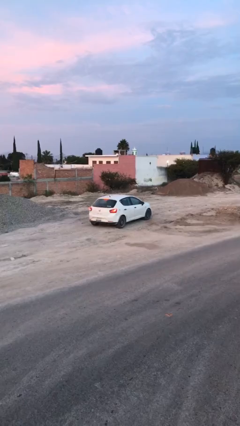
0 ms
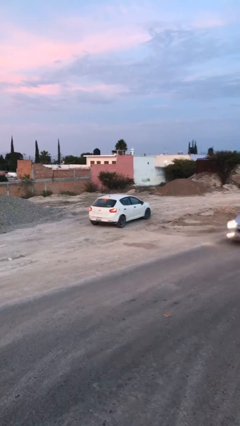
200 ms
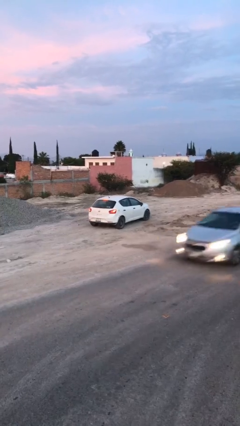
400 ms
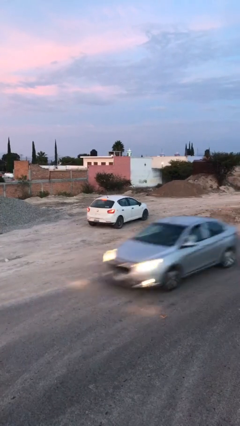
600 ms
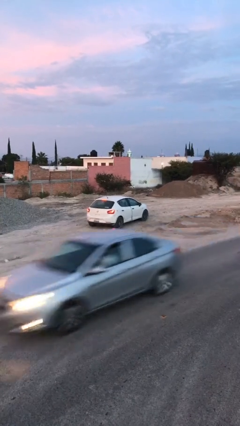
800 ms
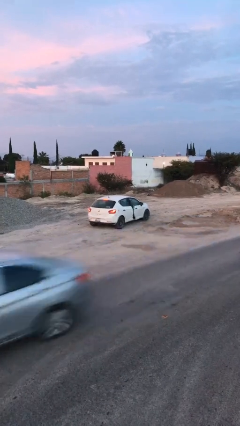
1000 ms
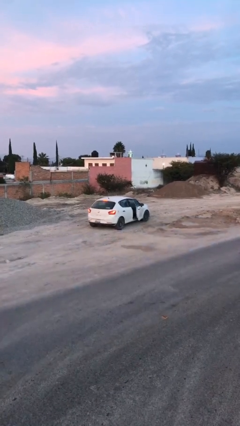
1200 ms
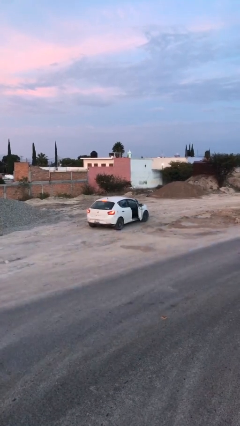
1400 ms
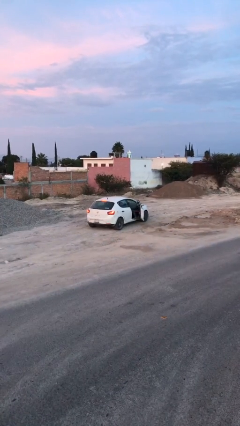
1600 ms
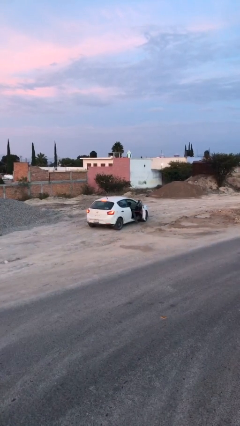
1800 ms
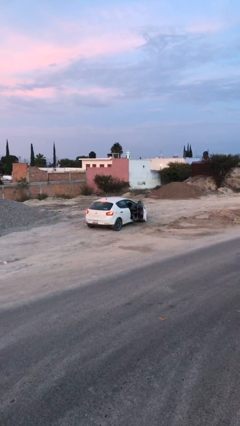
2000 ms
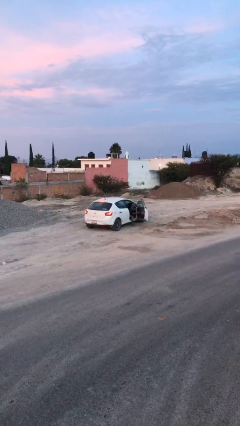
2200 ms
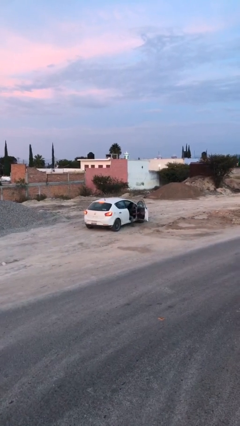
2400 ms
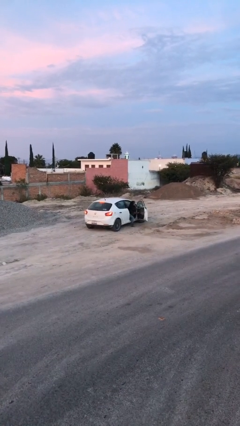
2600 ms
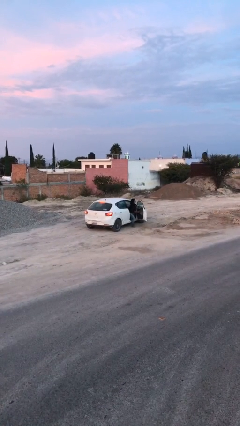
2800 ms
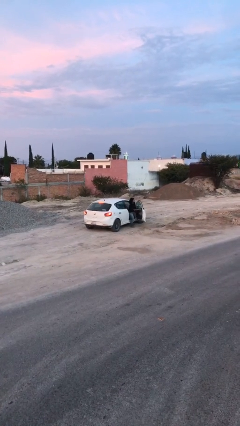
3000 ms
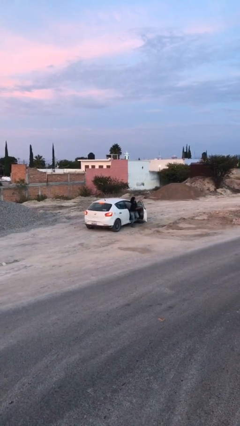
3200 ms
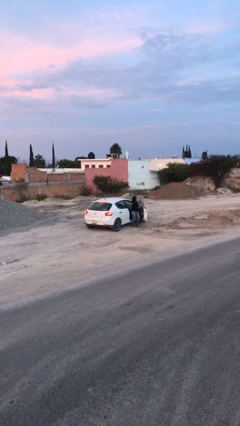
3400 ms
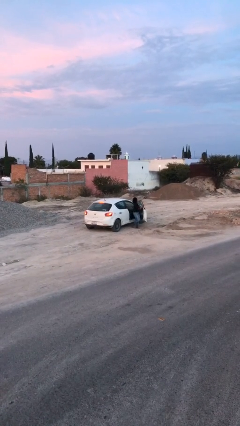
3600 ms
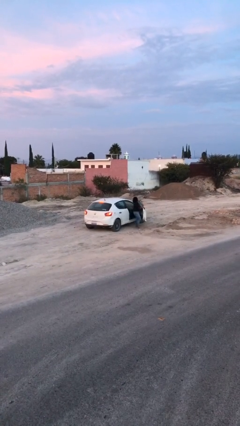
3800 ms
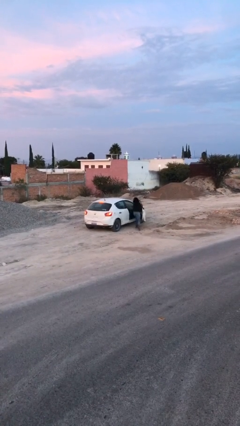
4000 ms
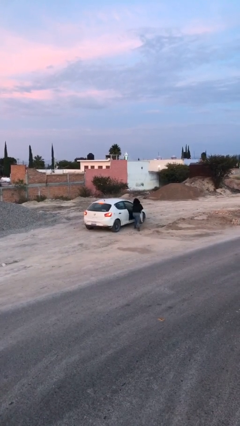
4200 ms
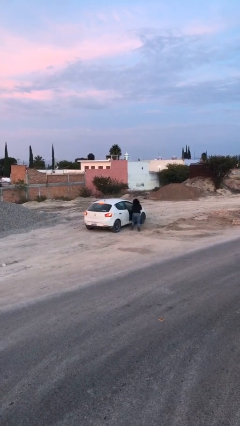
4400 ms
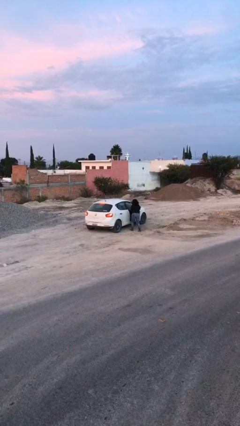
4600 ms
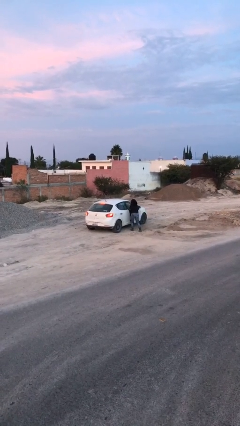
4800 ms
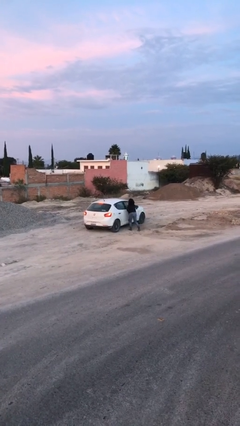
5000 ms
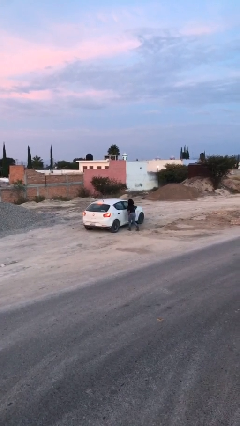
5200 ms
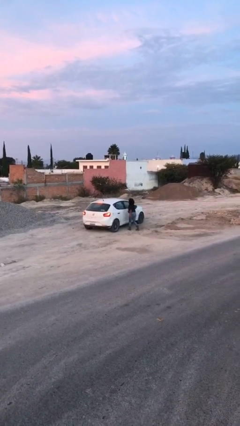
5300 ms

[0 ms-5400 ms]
car drops off person

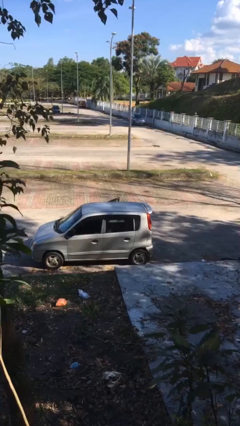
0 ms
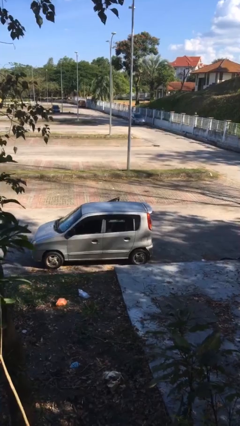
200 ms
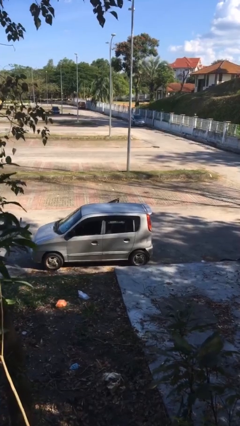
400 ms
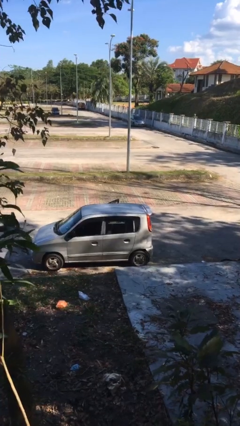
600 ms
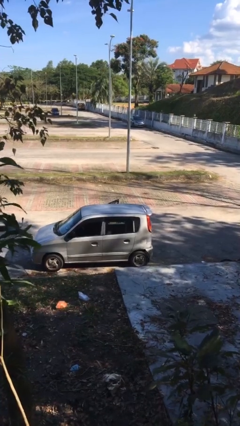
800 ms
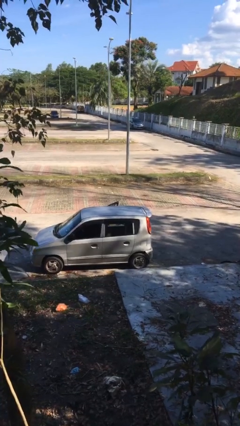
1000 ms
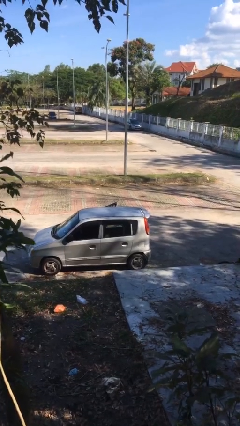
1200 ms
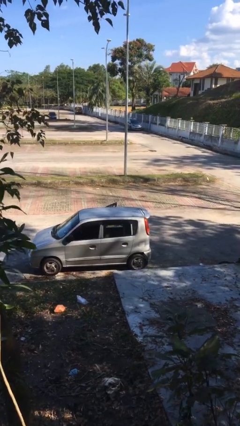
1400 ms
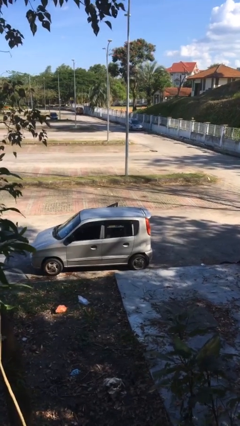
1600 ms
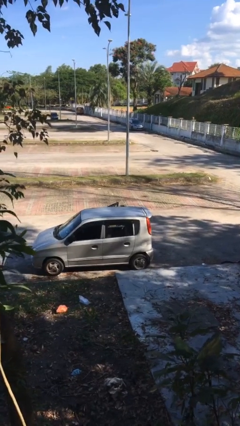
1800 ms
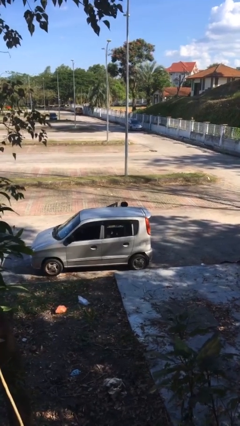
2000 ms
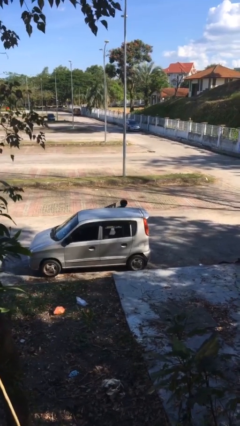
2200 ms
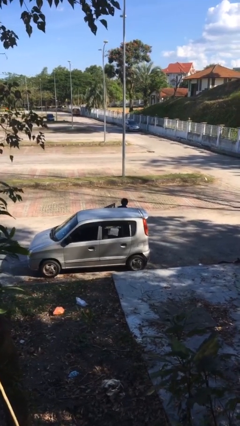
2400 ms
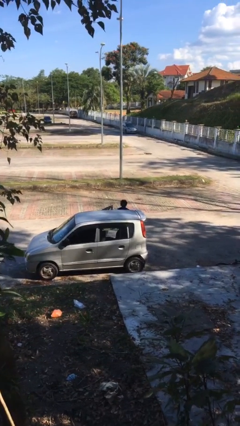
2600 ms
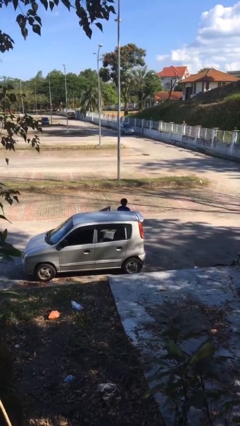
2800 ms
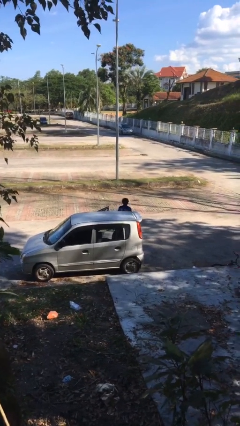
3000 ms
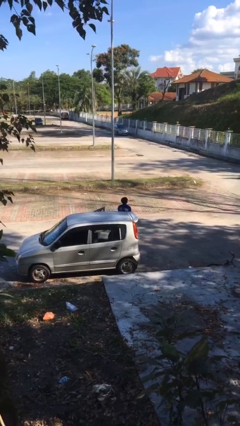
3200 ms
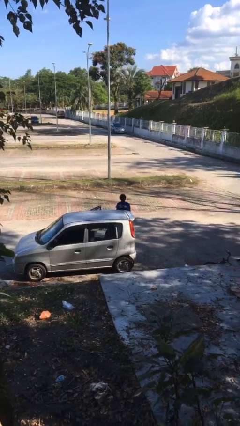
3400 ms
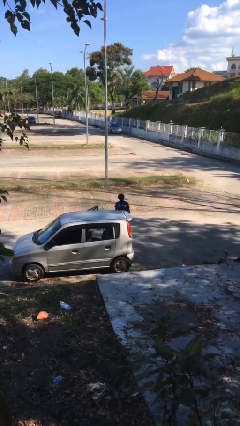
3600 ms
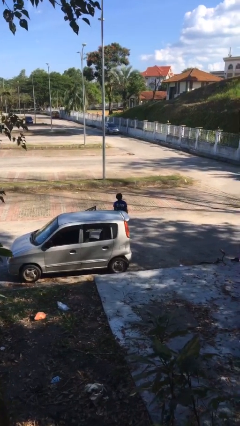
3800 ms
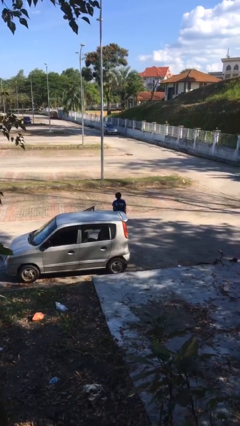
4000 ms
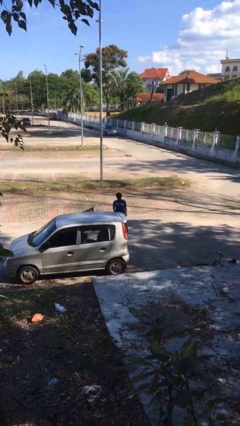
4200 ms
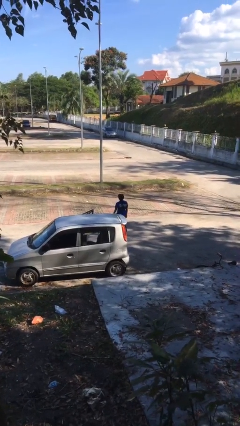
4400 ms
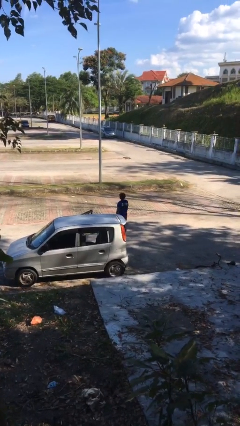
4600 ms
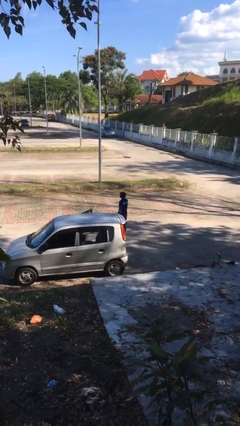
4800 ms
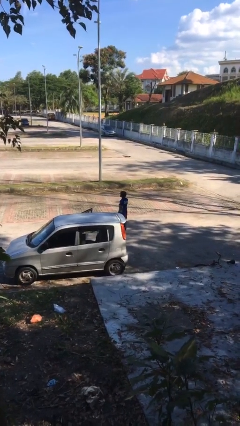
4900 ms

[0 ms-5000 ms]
person exits car

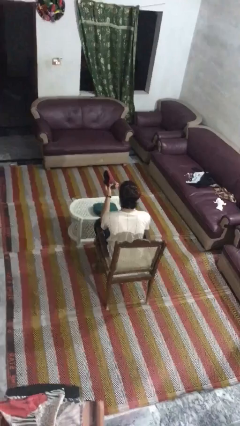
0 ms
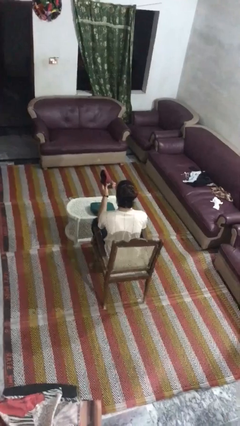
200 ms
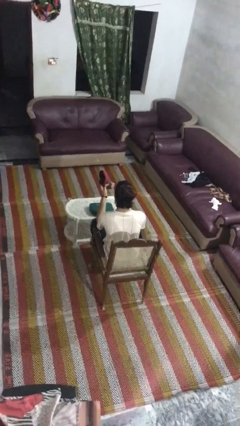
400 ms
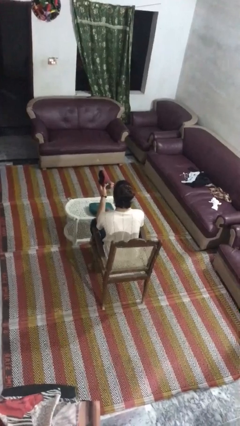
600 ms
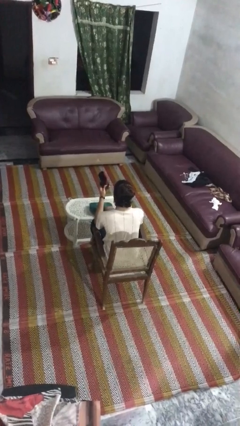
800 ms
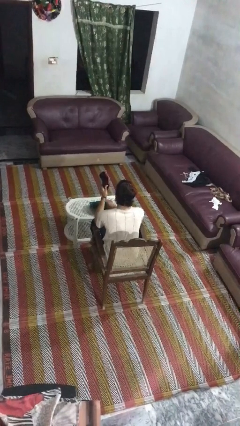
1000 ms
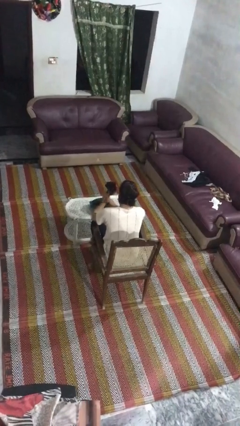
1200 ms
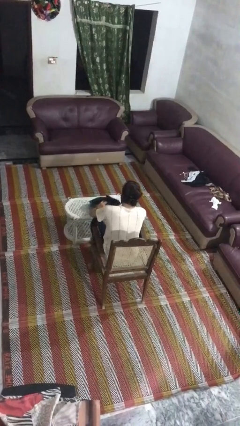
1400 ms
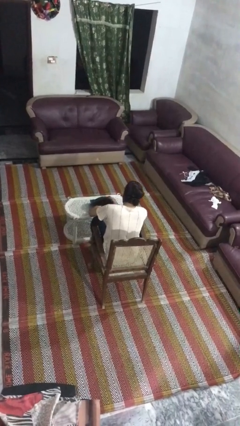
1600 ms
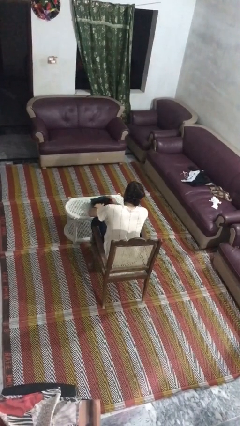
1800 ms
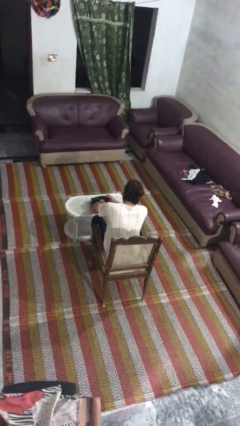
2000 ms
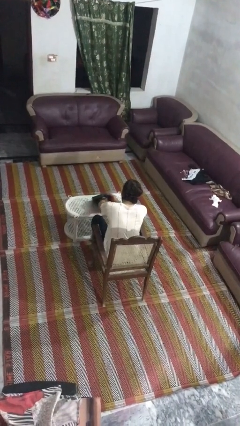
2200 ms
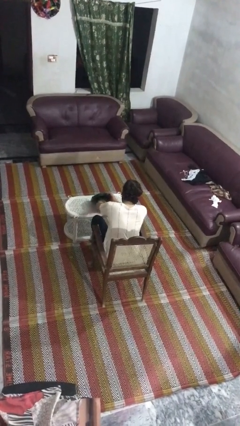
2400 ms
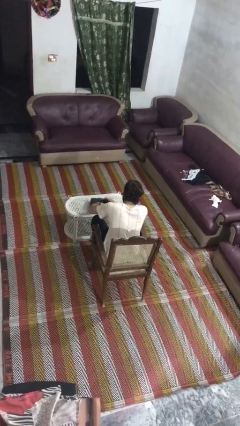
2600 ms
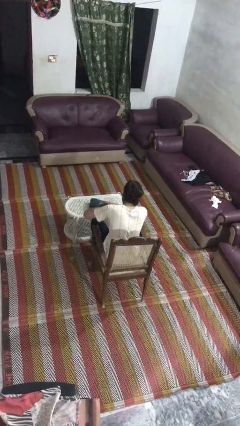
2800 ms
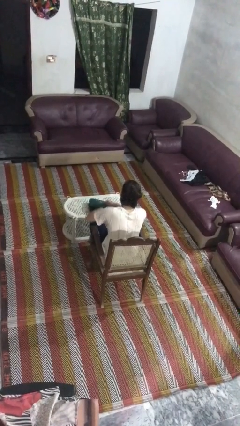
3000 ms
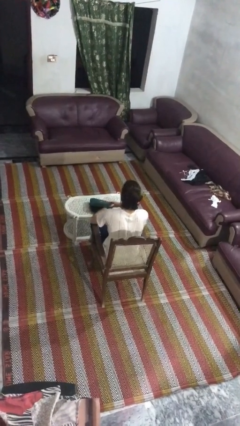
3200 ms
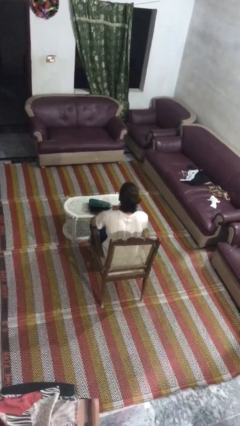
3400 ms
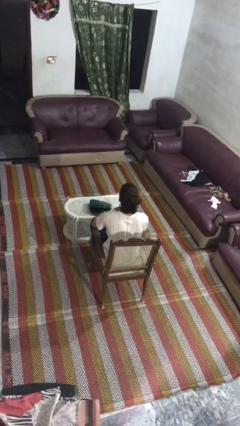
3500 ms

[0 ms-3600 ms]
person puts object into purse

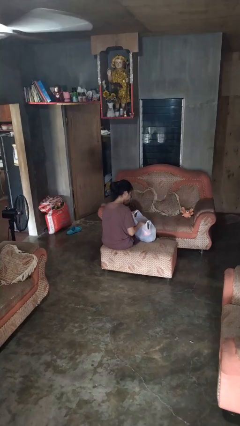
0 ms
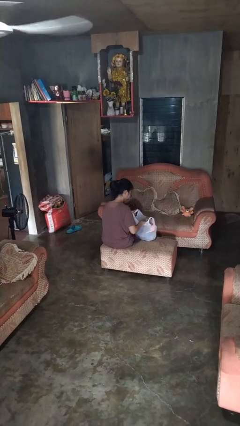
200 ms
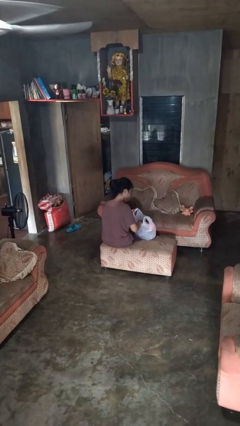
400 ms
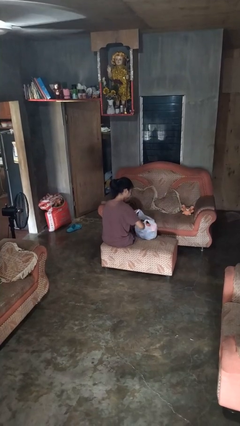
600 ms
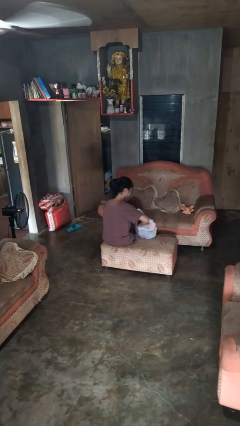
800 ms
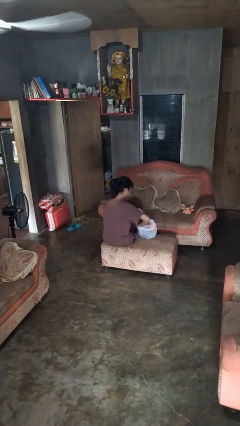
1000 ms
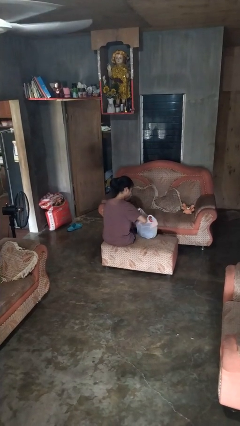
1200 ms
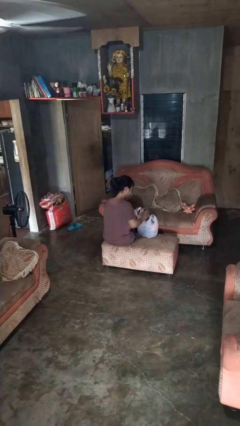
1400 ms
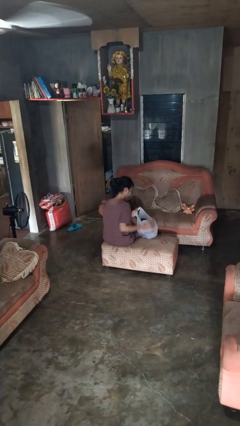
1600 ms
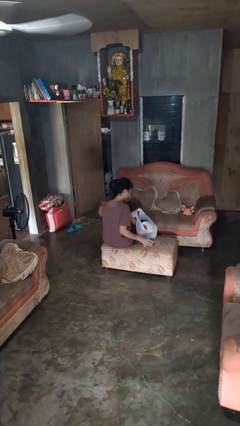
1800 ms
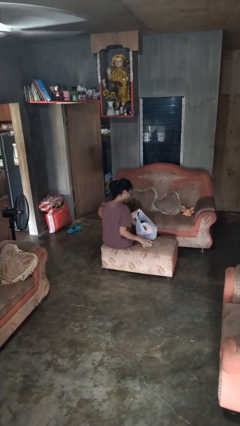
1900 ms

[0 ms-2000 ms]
person takes object from bag

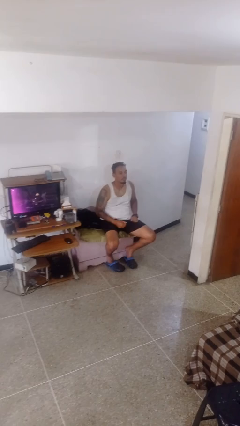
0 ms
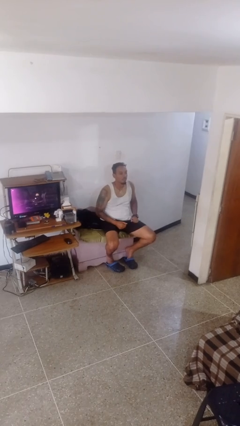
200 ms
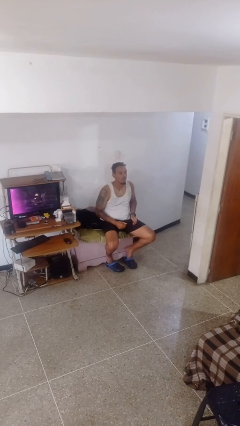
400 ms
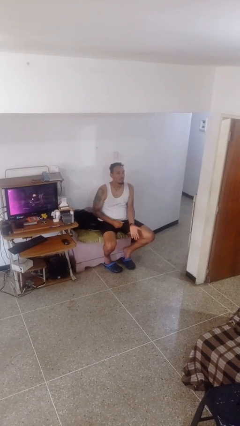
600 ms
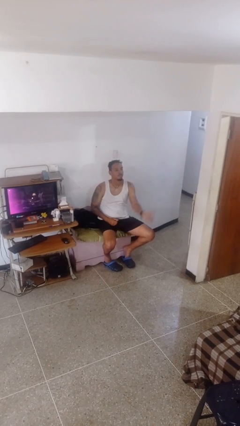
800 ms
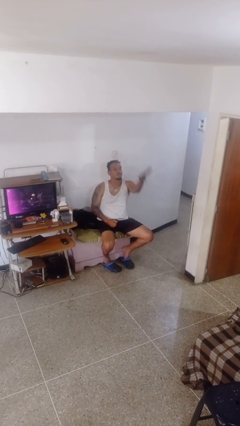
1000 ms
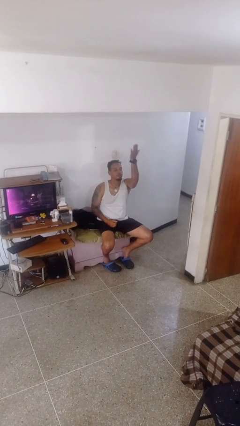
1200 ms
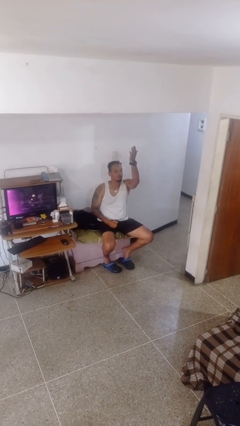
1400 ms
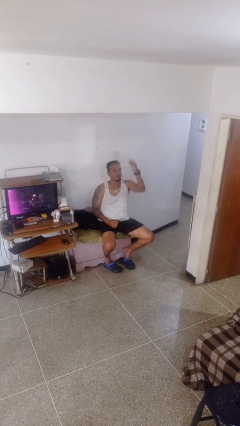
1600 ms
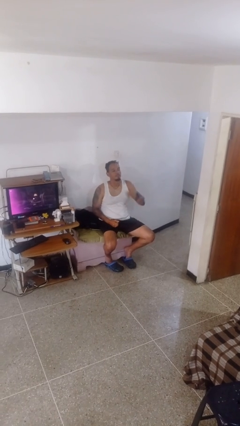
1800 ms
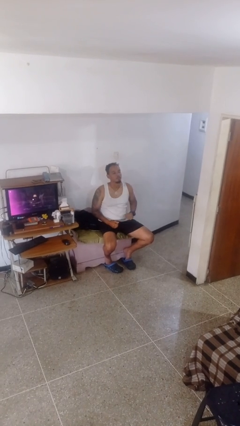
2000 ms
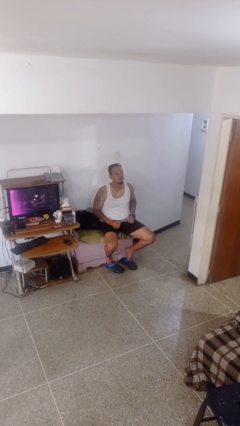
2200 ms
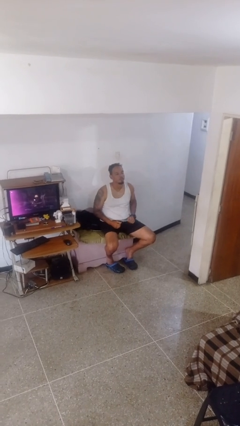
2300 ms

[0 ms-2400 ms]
person gestures swipe up
